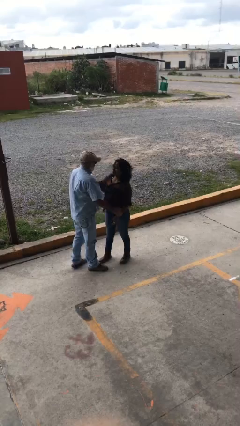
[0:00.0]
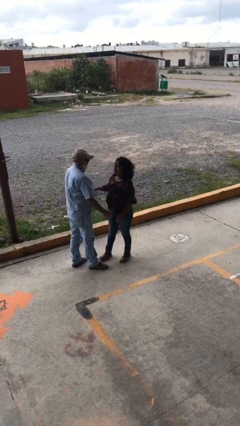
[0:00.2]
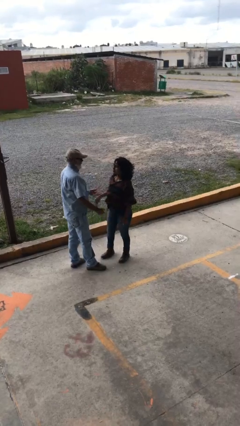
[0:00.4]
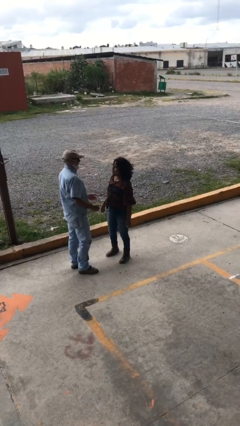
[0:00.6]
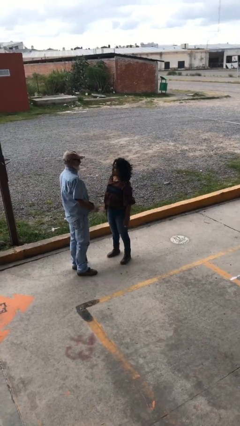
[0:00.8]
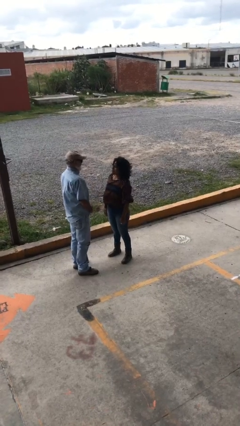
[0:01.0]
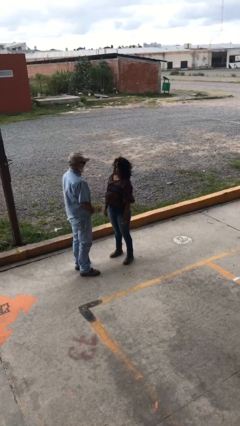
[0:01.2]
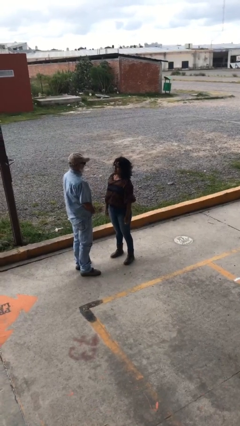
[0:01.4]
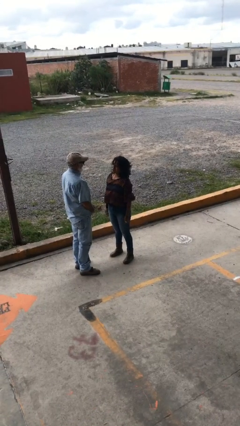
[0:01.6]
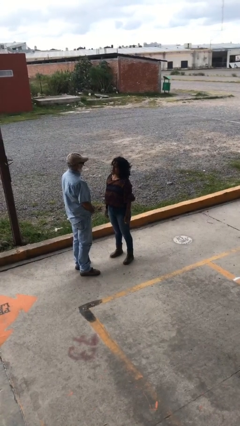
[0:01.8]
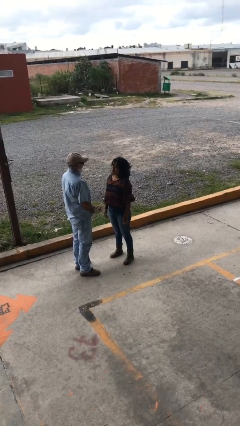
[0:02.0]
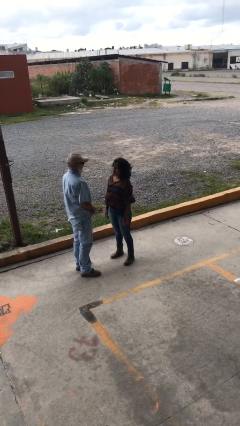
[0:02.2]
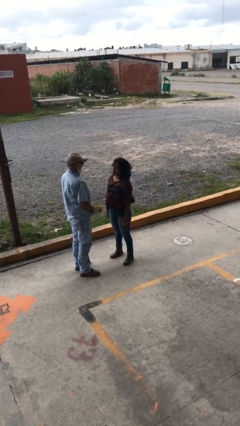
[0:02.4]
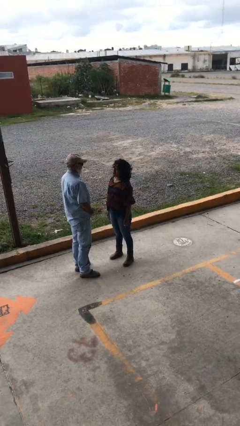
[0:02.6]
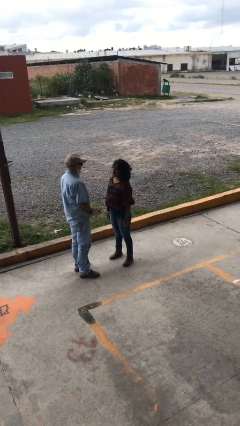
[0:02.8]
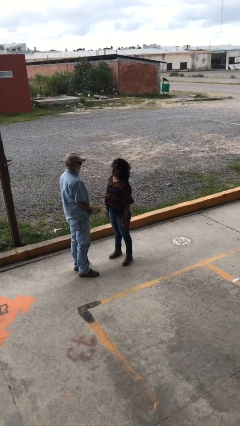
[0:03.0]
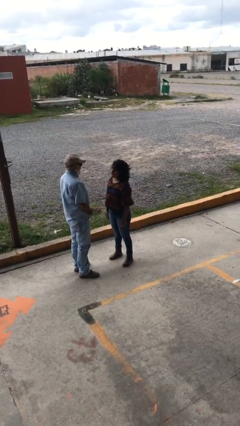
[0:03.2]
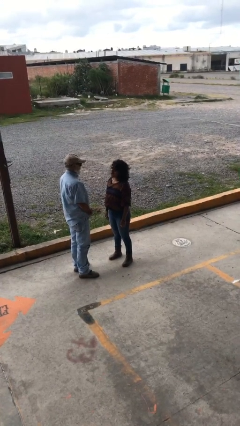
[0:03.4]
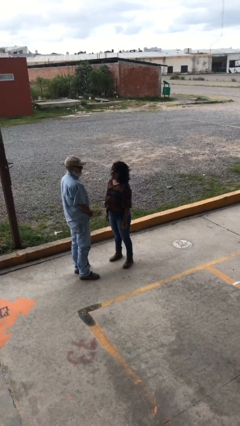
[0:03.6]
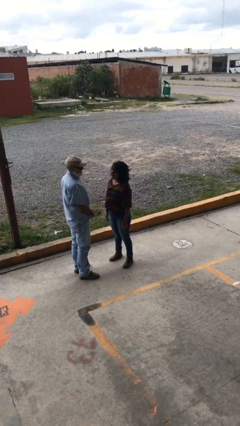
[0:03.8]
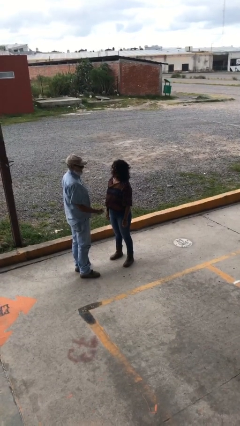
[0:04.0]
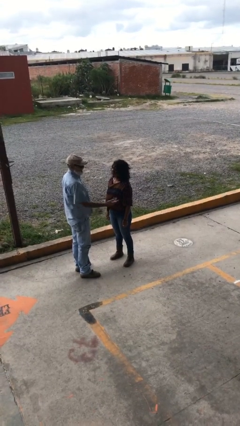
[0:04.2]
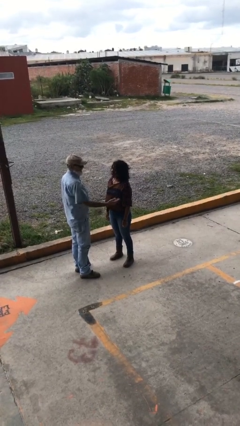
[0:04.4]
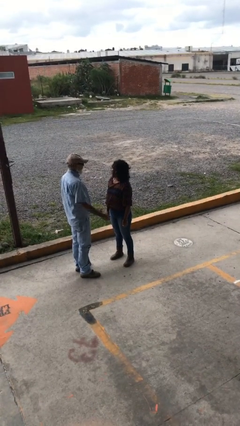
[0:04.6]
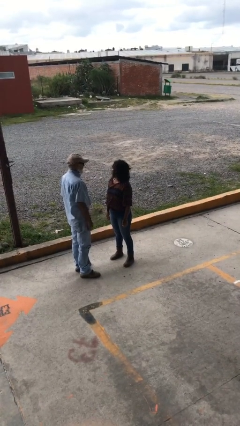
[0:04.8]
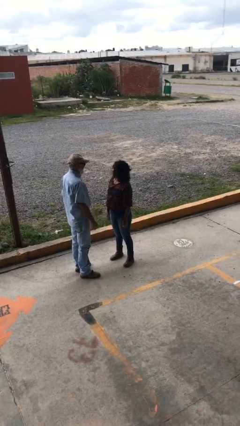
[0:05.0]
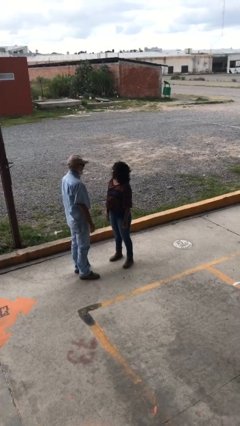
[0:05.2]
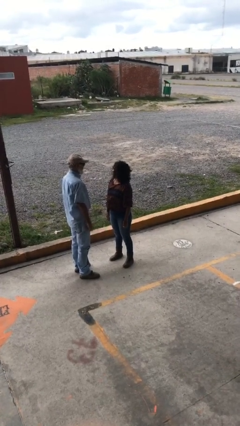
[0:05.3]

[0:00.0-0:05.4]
person talks to person

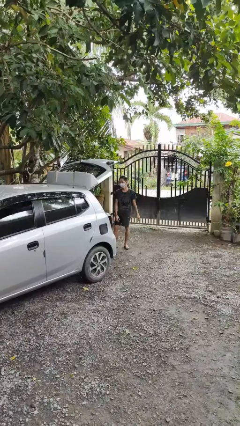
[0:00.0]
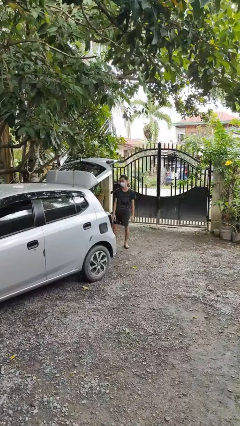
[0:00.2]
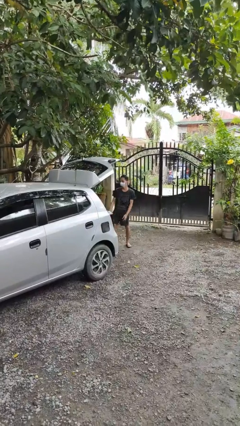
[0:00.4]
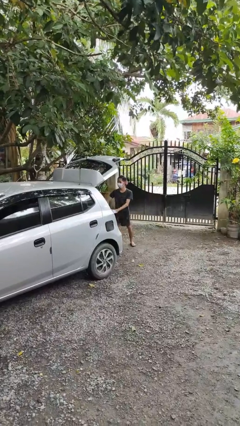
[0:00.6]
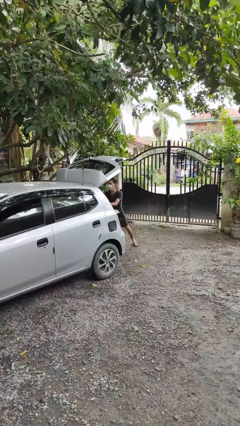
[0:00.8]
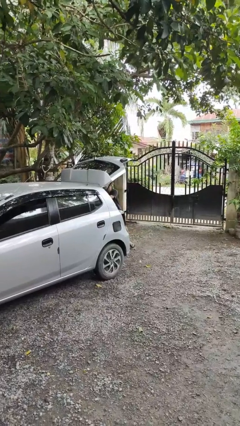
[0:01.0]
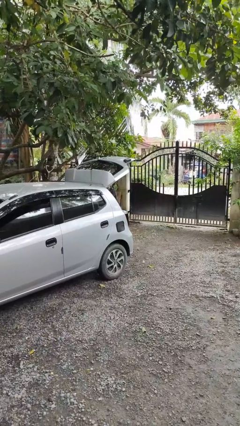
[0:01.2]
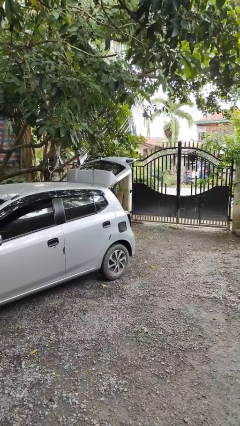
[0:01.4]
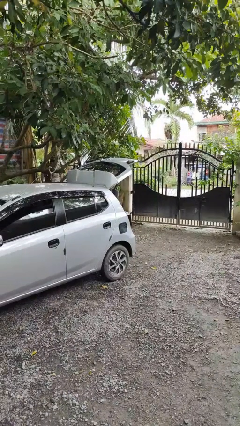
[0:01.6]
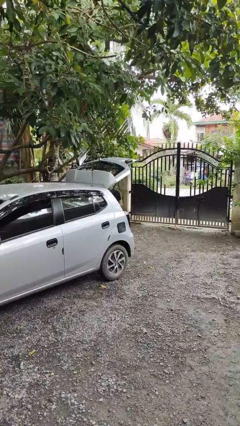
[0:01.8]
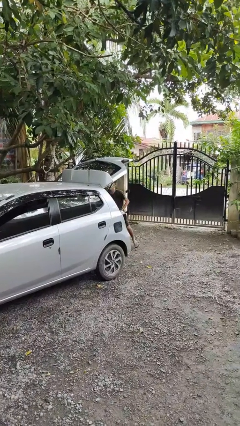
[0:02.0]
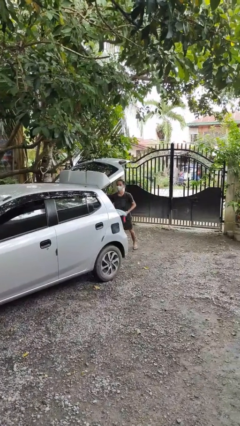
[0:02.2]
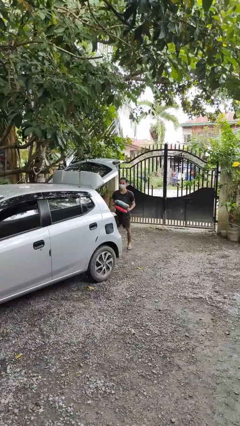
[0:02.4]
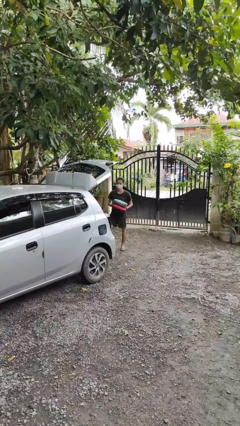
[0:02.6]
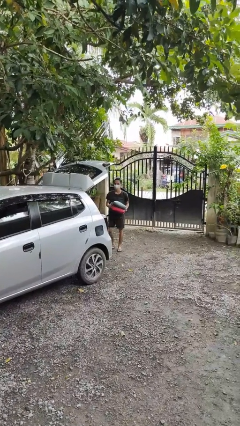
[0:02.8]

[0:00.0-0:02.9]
person unloads car

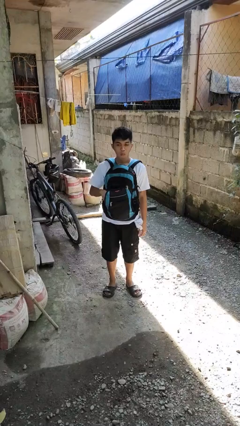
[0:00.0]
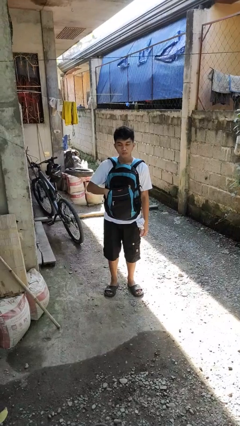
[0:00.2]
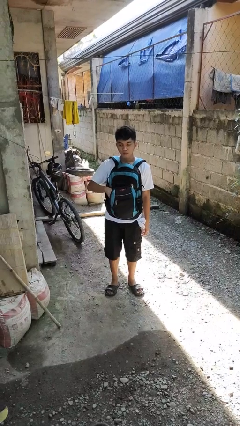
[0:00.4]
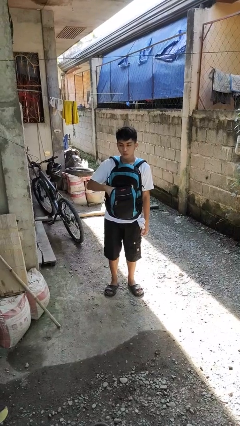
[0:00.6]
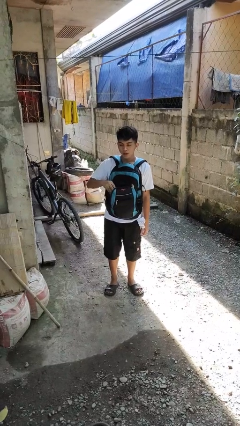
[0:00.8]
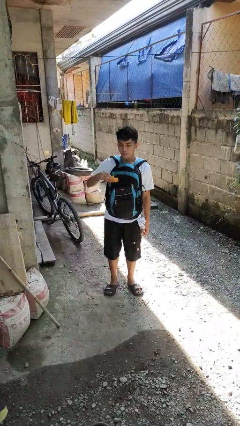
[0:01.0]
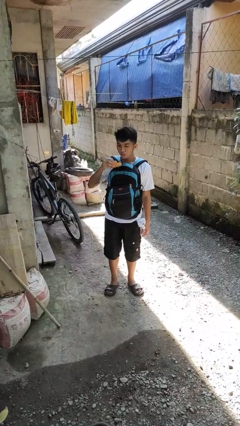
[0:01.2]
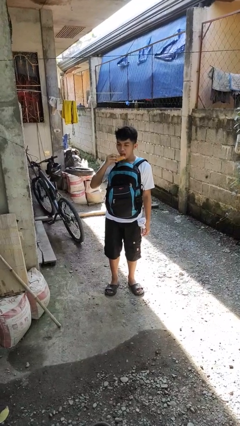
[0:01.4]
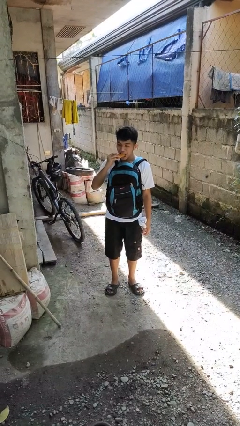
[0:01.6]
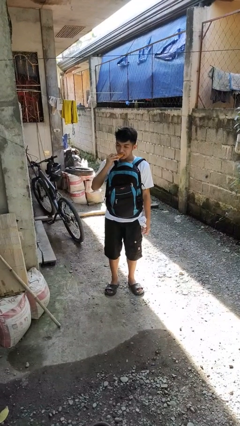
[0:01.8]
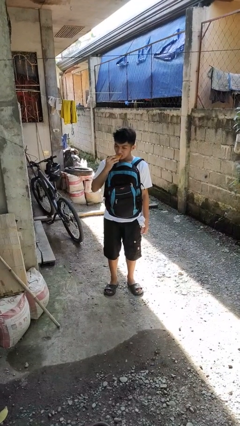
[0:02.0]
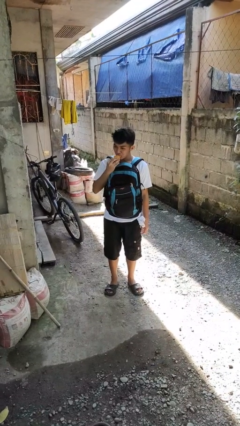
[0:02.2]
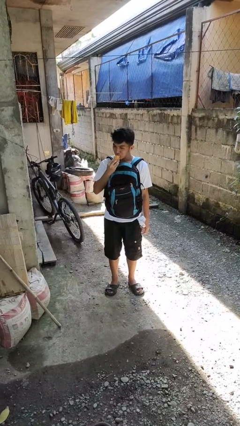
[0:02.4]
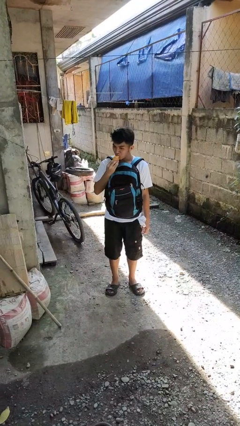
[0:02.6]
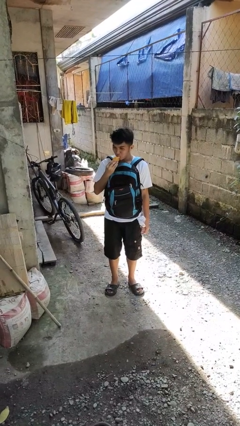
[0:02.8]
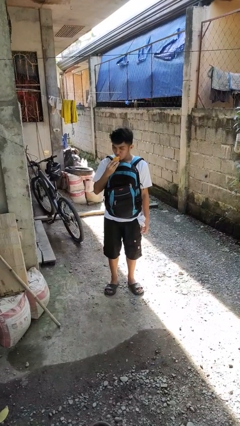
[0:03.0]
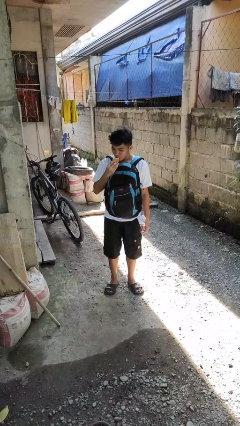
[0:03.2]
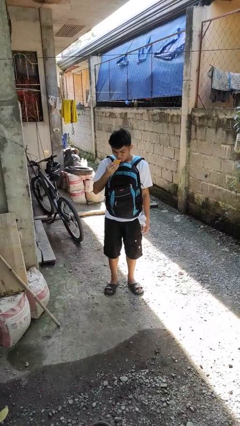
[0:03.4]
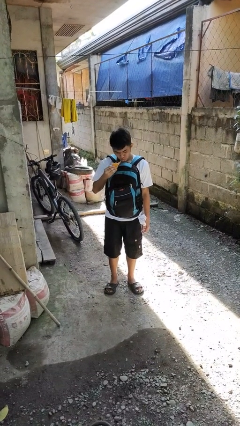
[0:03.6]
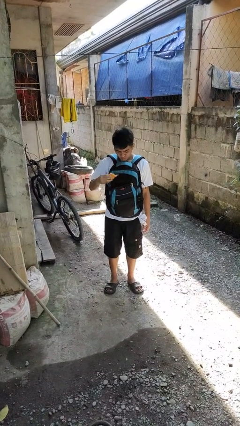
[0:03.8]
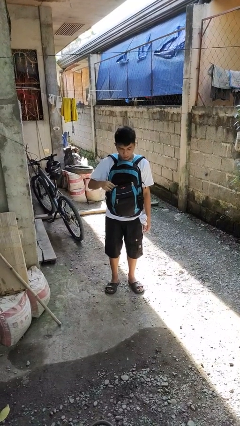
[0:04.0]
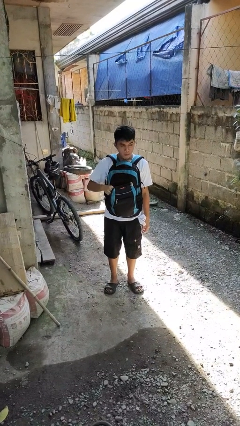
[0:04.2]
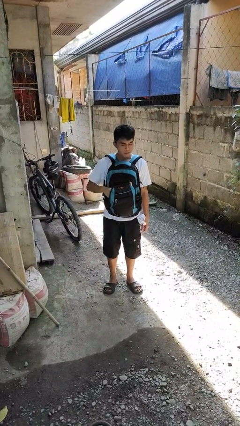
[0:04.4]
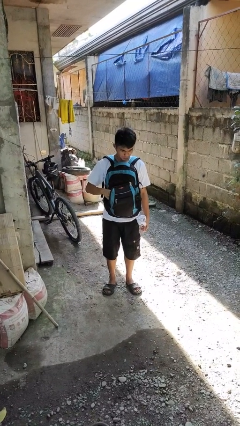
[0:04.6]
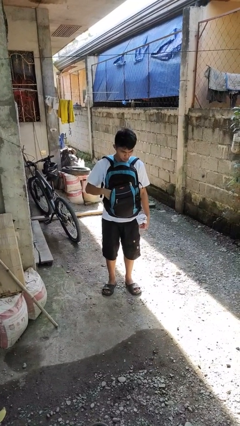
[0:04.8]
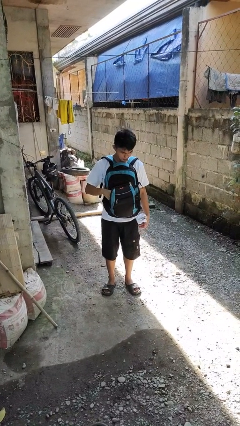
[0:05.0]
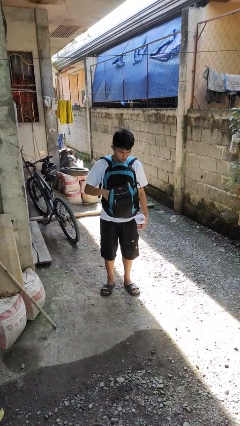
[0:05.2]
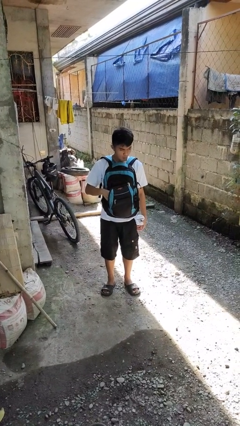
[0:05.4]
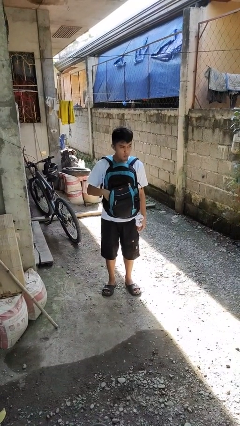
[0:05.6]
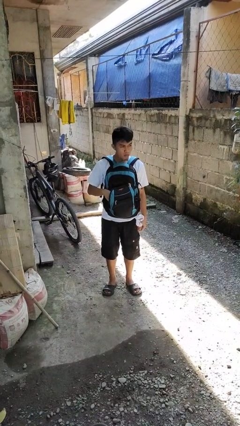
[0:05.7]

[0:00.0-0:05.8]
person eats snack from bag

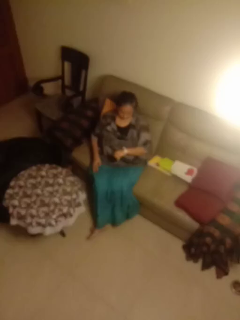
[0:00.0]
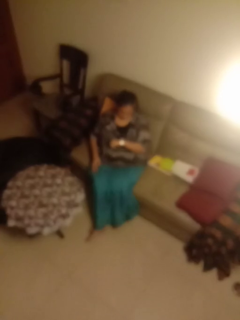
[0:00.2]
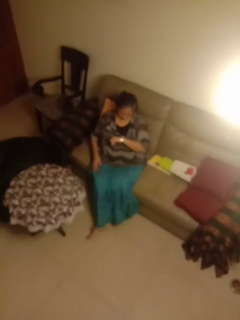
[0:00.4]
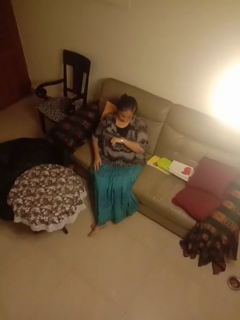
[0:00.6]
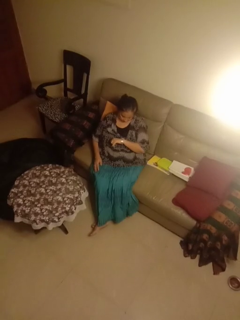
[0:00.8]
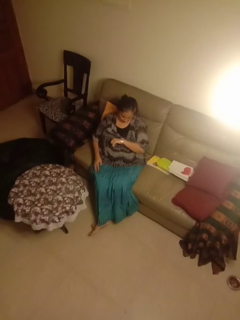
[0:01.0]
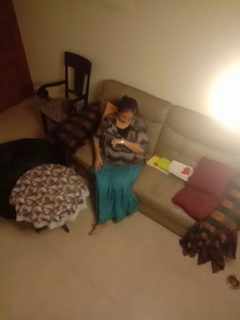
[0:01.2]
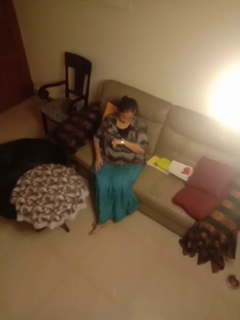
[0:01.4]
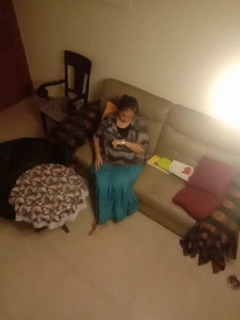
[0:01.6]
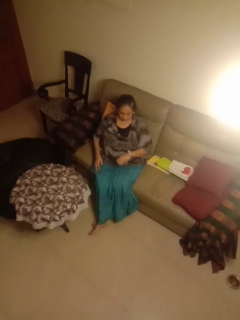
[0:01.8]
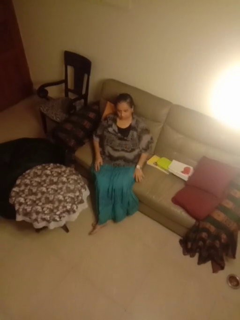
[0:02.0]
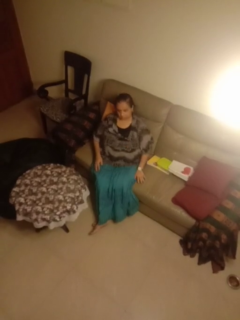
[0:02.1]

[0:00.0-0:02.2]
person looks at wristwatch

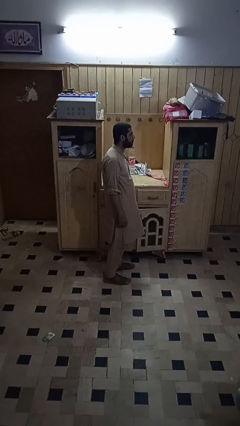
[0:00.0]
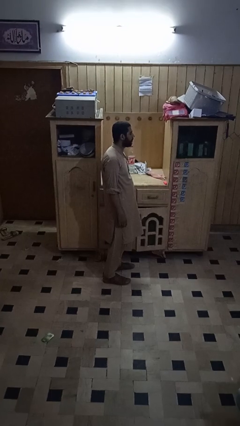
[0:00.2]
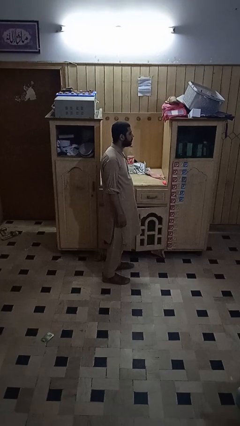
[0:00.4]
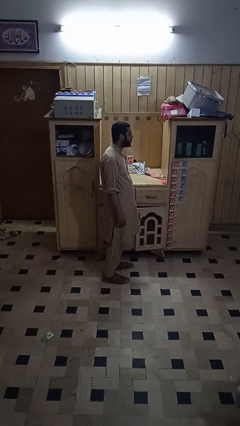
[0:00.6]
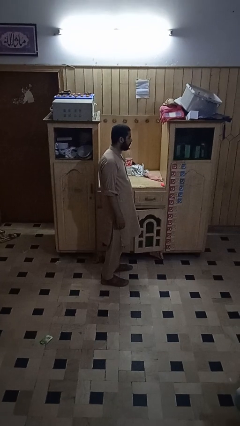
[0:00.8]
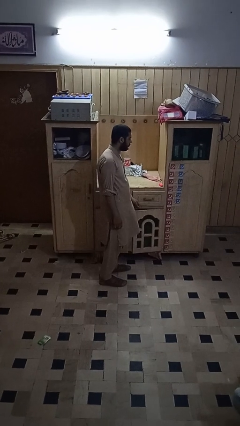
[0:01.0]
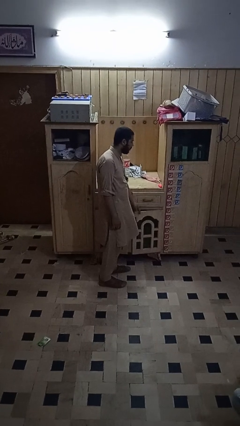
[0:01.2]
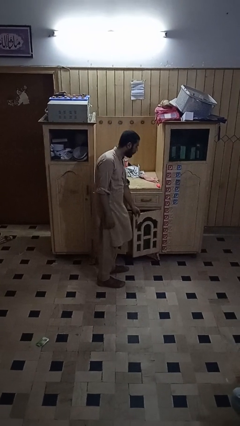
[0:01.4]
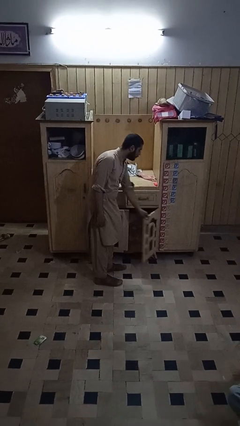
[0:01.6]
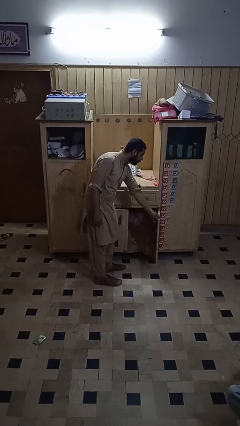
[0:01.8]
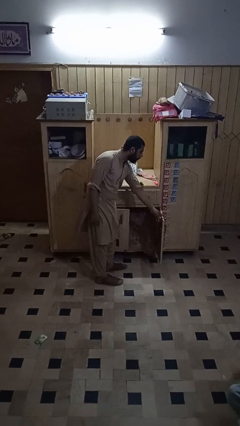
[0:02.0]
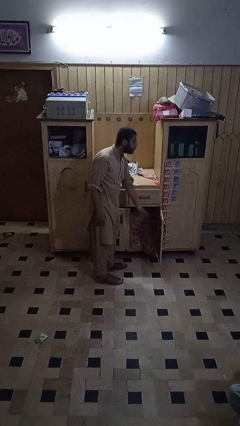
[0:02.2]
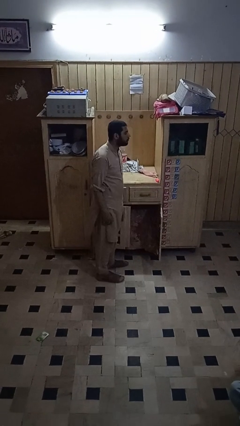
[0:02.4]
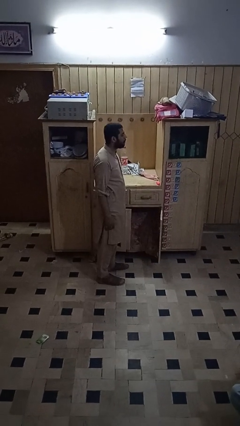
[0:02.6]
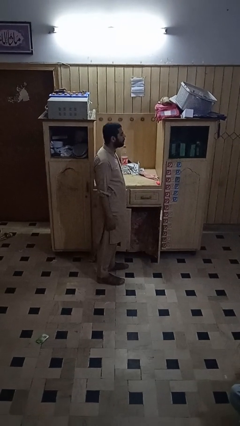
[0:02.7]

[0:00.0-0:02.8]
person closes cabinet
